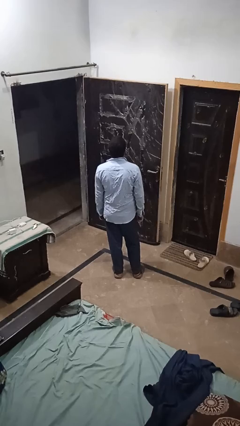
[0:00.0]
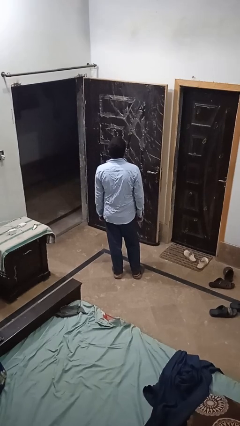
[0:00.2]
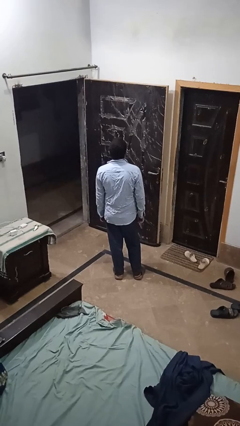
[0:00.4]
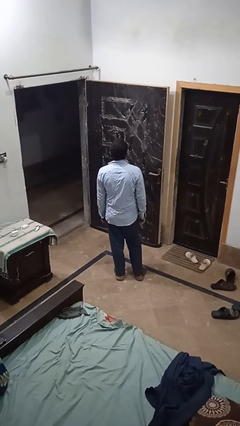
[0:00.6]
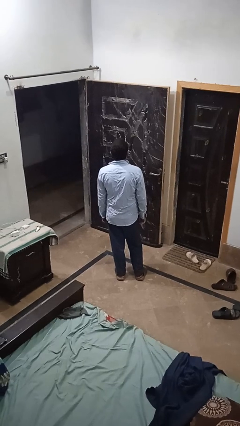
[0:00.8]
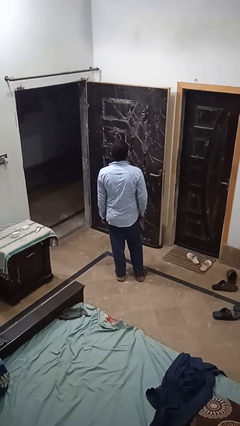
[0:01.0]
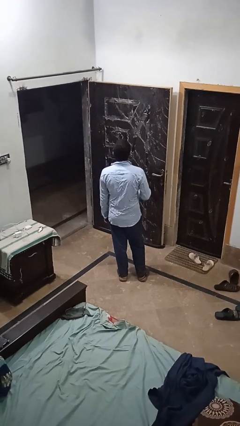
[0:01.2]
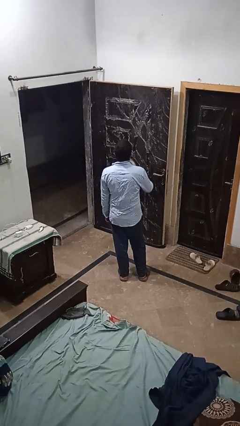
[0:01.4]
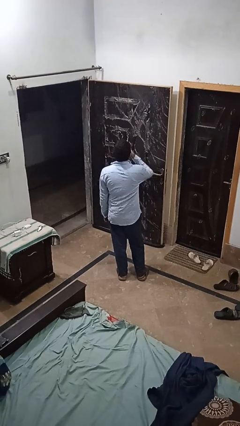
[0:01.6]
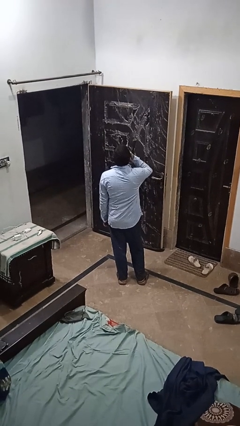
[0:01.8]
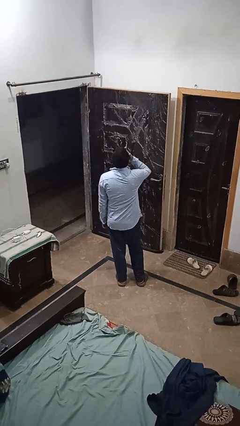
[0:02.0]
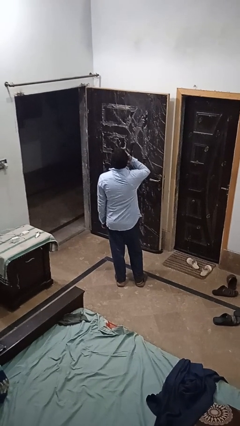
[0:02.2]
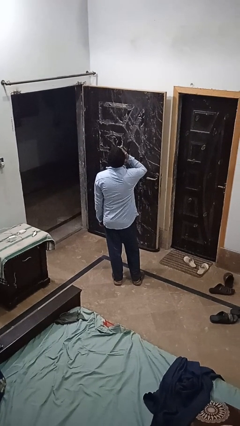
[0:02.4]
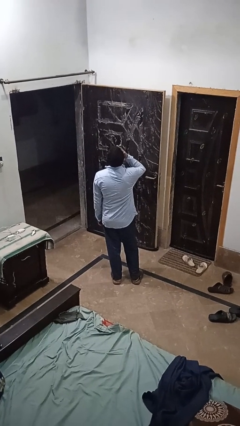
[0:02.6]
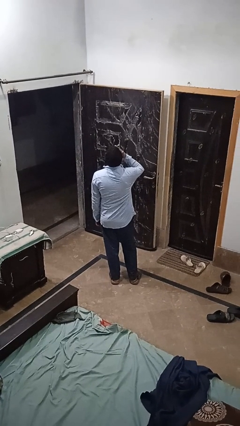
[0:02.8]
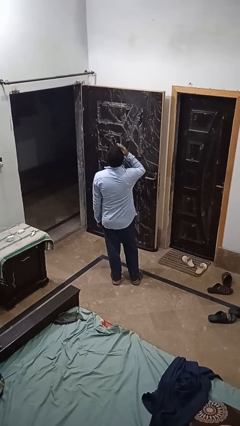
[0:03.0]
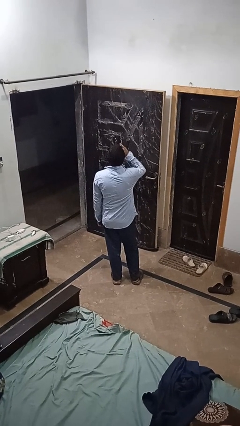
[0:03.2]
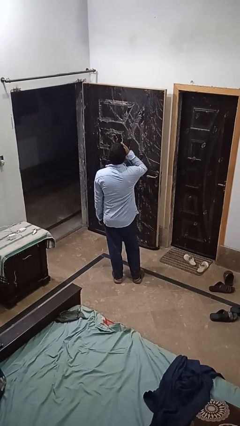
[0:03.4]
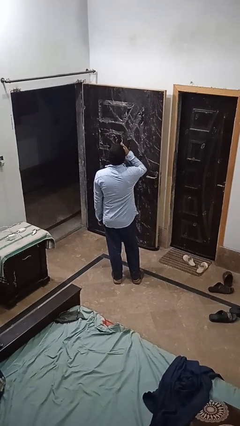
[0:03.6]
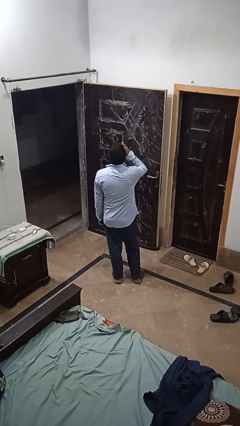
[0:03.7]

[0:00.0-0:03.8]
person yawns

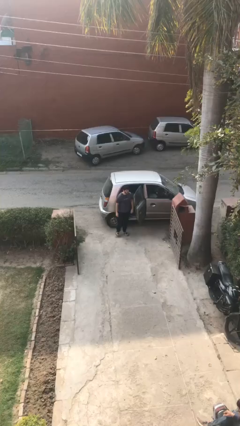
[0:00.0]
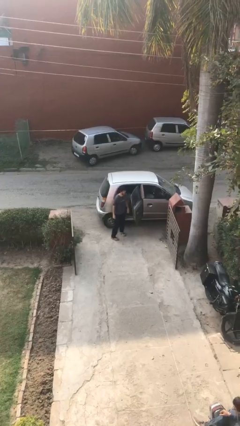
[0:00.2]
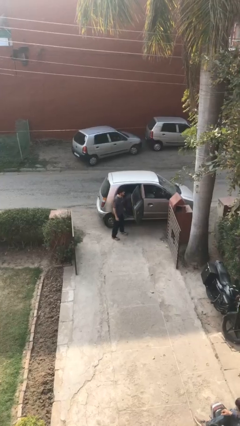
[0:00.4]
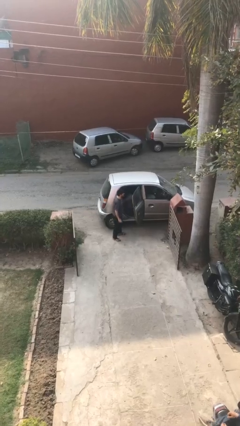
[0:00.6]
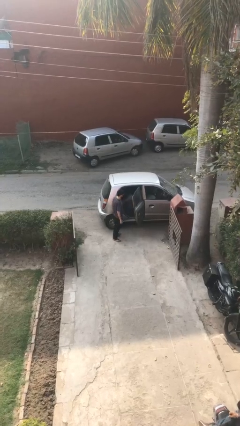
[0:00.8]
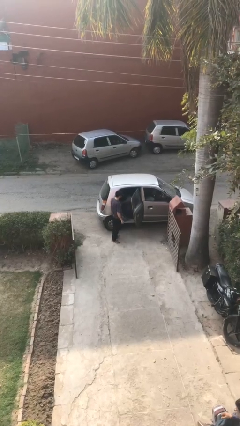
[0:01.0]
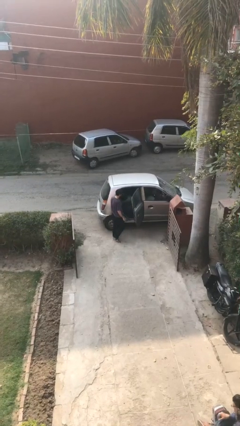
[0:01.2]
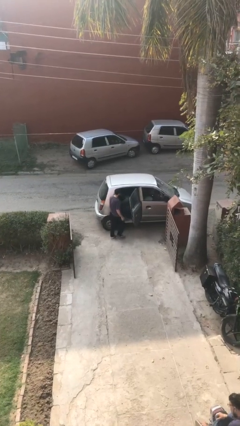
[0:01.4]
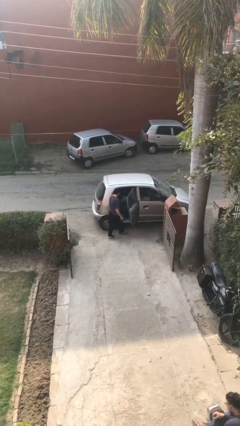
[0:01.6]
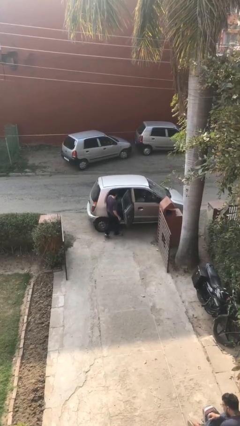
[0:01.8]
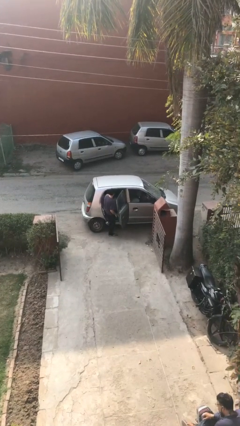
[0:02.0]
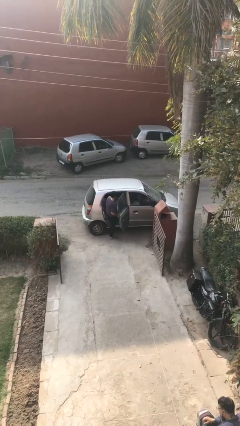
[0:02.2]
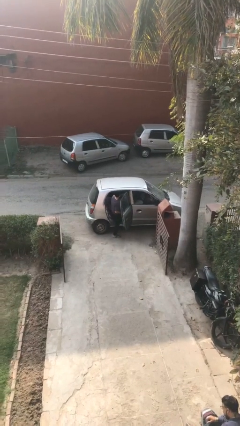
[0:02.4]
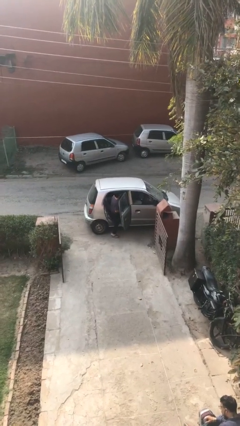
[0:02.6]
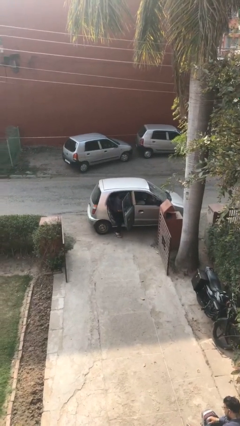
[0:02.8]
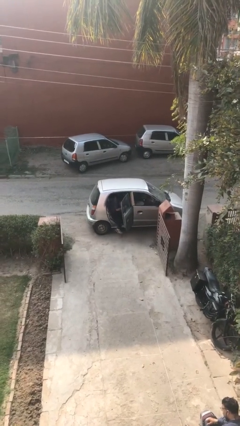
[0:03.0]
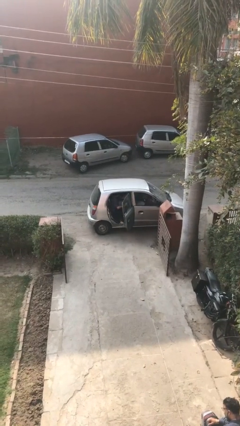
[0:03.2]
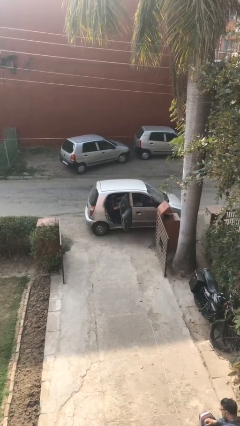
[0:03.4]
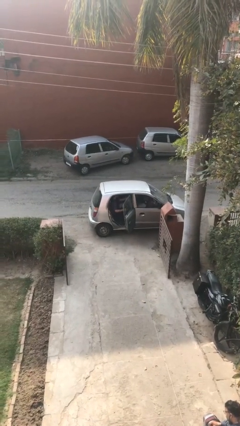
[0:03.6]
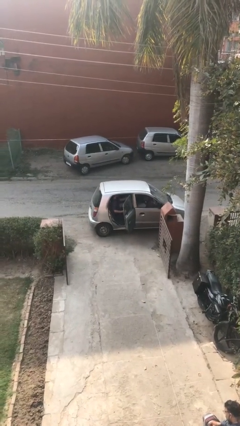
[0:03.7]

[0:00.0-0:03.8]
person enters car

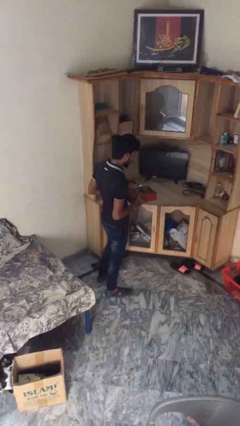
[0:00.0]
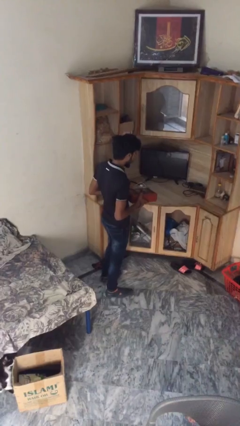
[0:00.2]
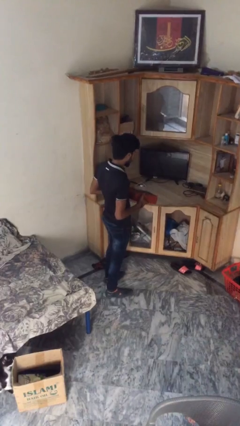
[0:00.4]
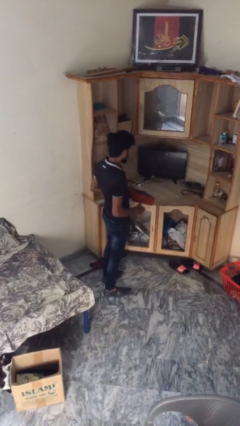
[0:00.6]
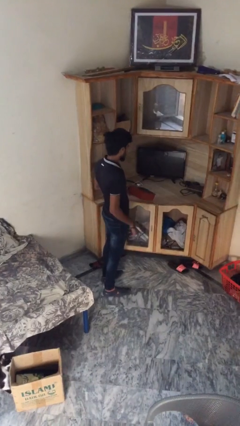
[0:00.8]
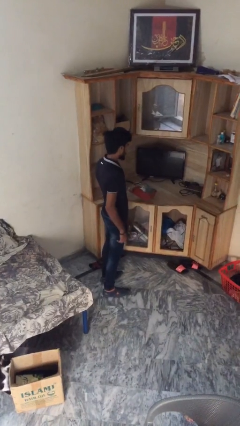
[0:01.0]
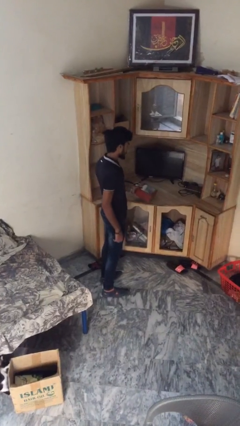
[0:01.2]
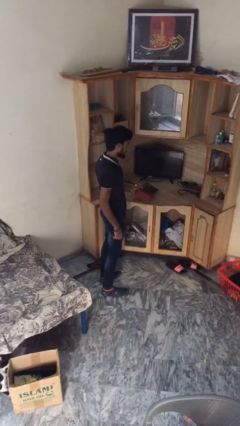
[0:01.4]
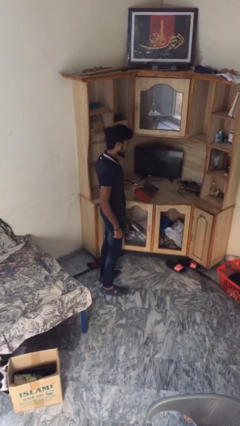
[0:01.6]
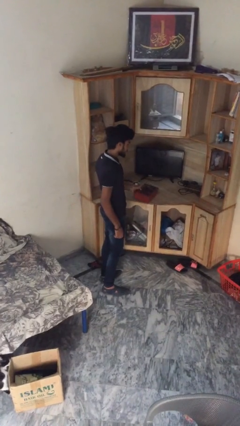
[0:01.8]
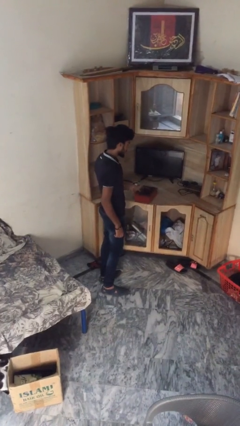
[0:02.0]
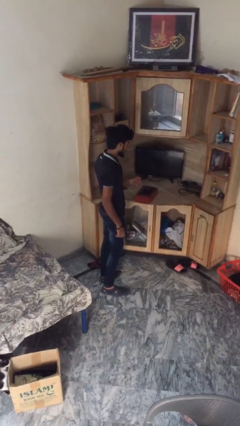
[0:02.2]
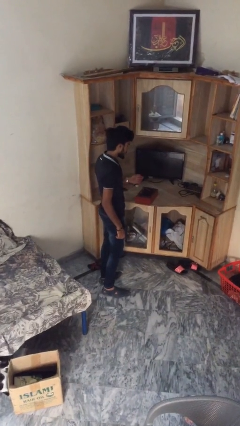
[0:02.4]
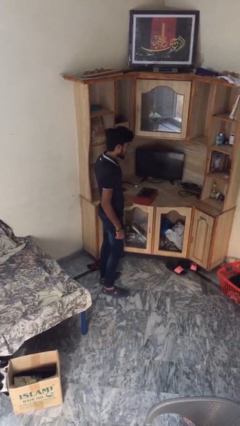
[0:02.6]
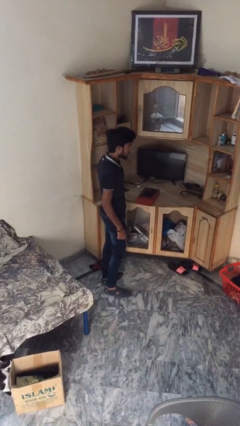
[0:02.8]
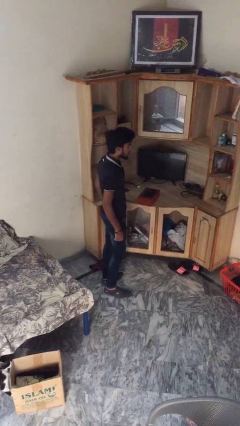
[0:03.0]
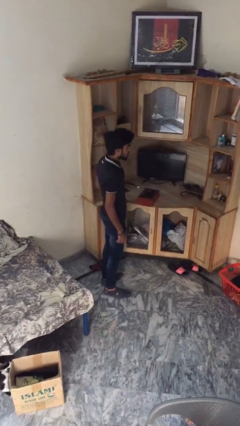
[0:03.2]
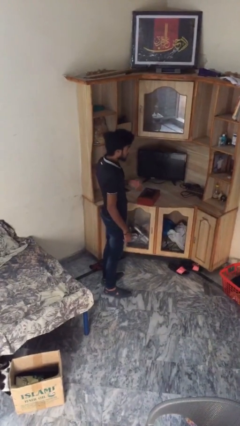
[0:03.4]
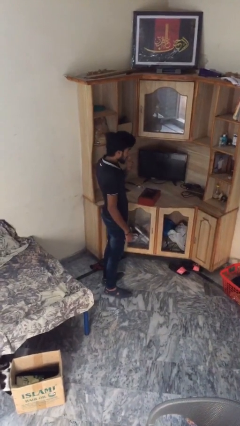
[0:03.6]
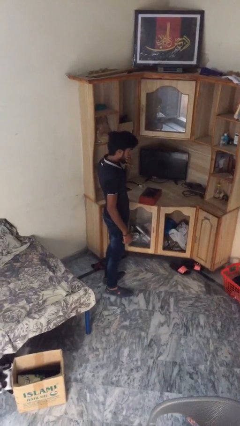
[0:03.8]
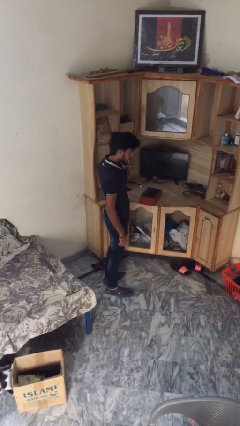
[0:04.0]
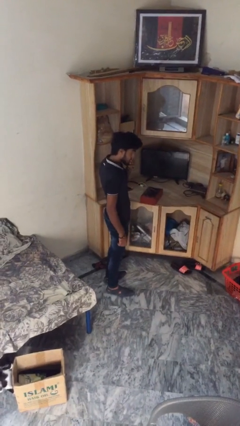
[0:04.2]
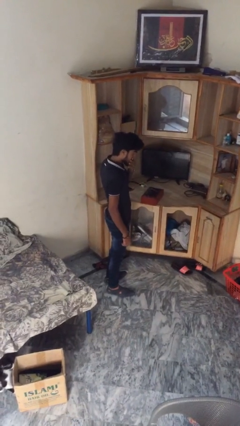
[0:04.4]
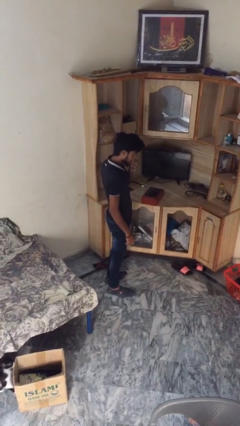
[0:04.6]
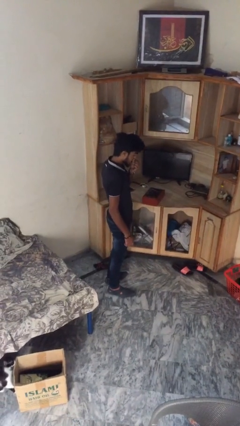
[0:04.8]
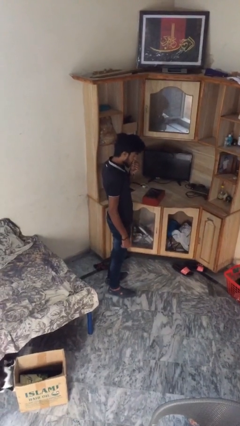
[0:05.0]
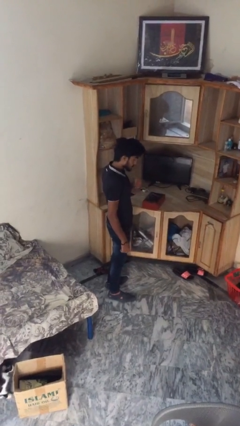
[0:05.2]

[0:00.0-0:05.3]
person puts down object on table

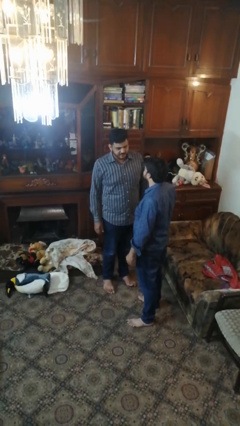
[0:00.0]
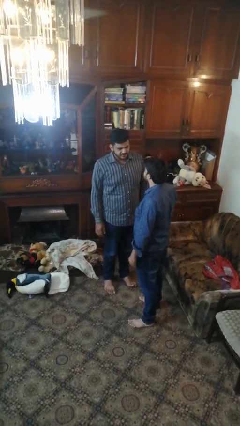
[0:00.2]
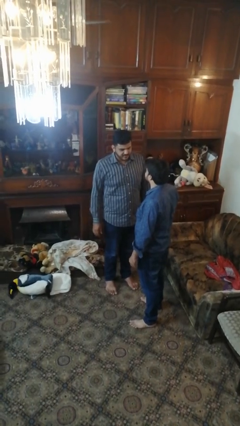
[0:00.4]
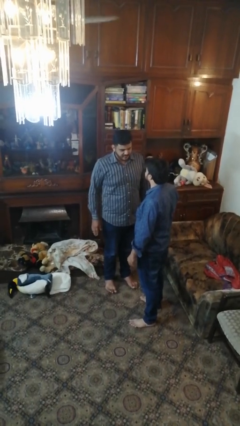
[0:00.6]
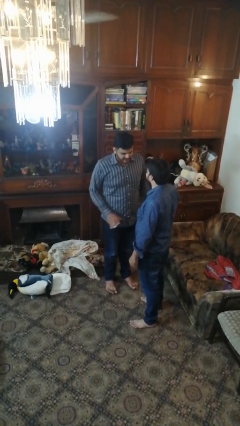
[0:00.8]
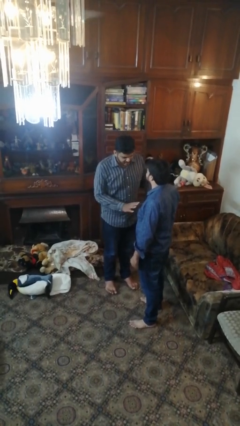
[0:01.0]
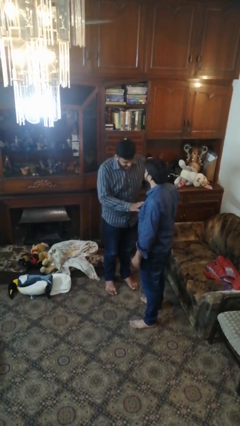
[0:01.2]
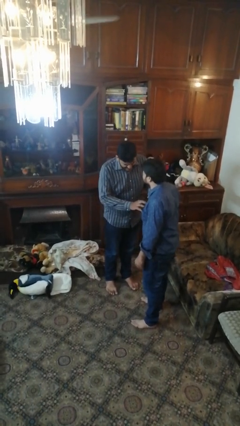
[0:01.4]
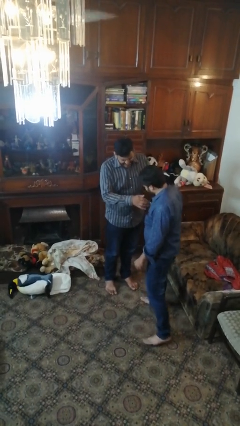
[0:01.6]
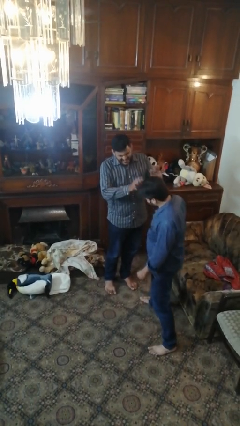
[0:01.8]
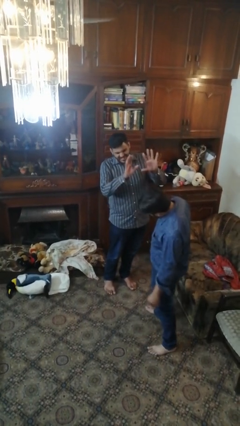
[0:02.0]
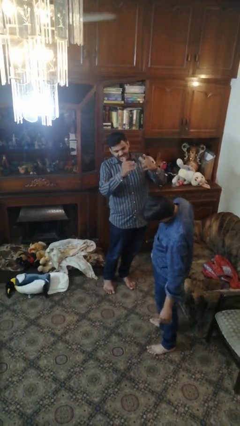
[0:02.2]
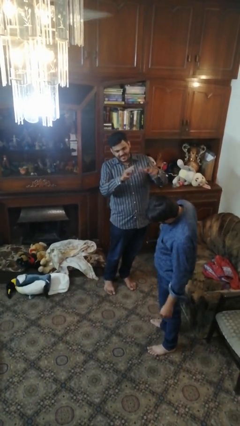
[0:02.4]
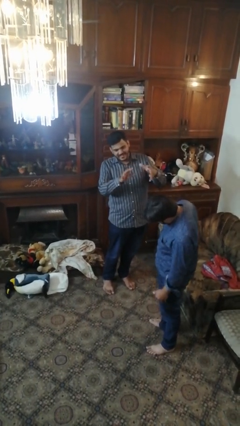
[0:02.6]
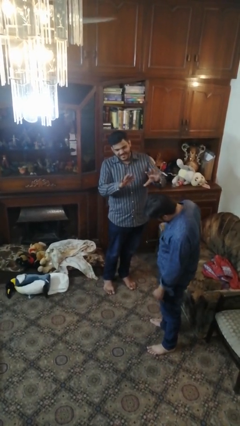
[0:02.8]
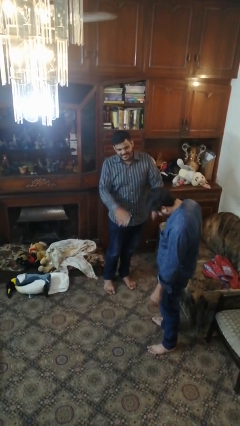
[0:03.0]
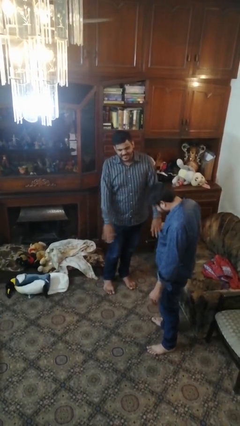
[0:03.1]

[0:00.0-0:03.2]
person shoves person

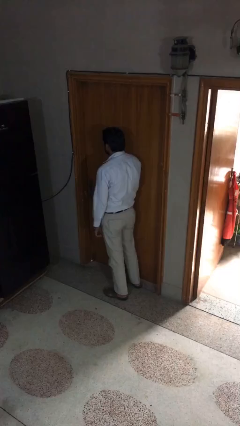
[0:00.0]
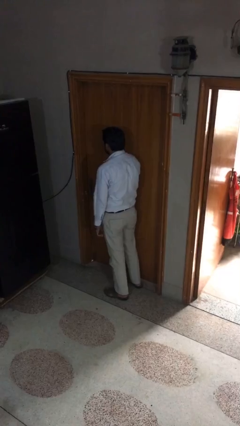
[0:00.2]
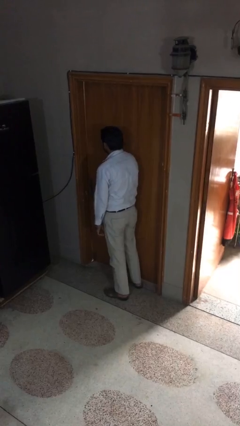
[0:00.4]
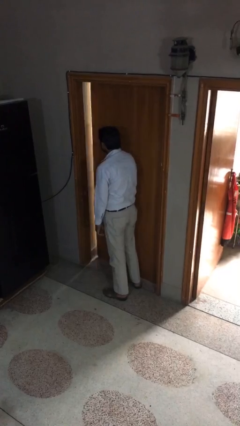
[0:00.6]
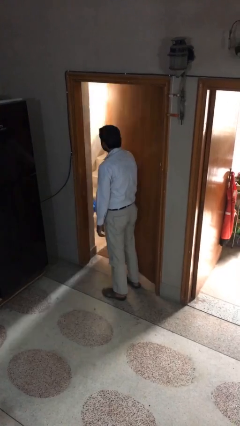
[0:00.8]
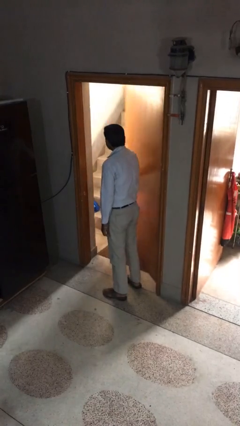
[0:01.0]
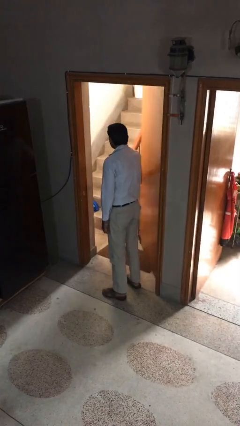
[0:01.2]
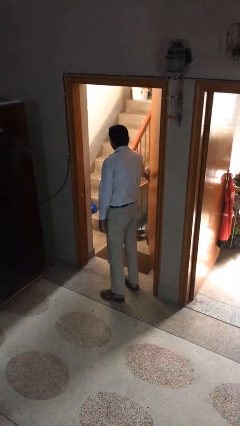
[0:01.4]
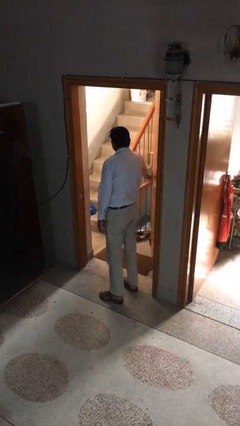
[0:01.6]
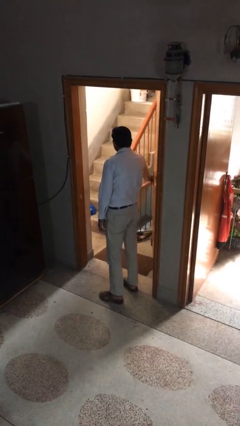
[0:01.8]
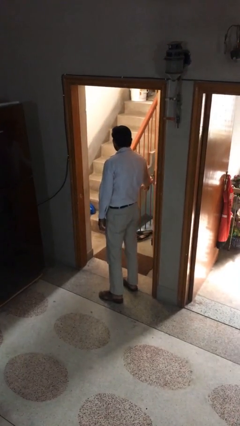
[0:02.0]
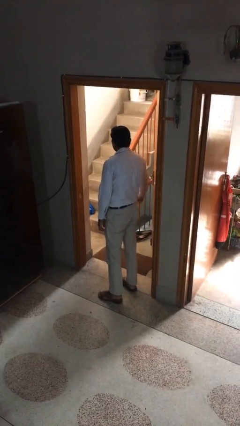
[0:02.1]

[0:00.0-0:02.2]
person opens facility door
